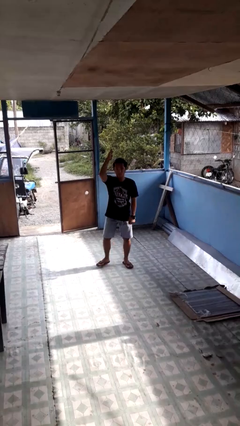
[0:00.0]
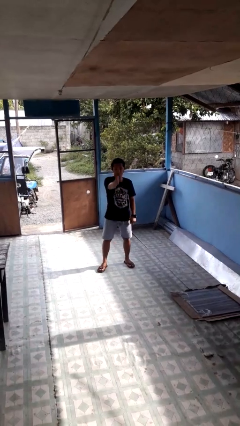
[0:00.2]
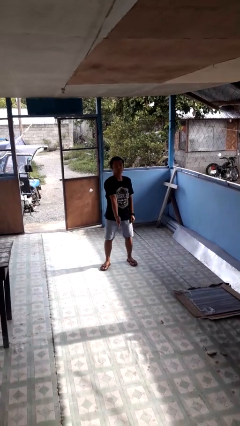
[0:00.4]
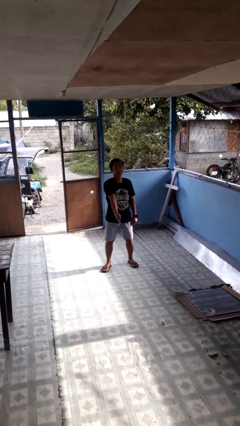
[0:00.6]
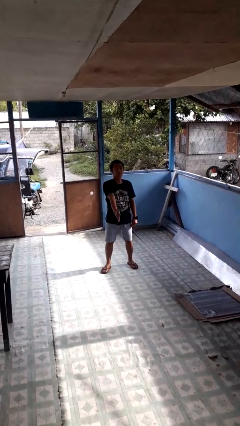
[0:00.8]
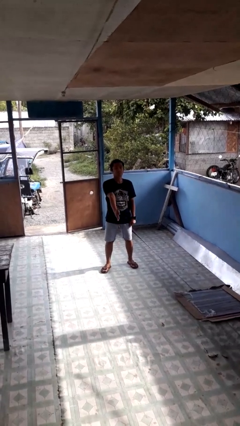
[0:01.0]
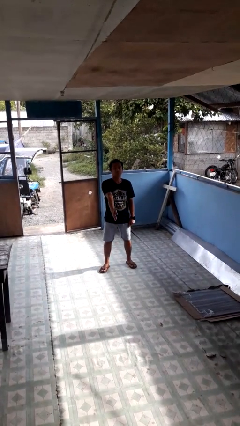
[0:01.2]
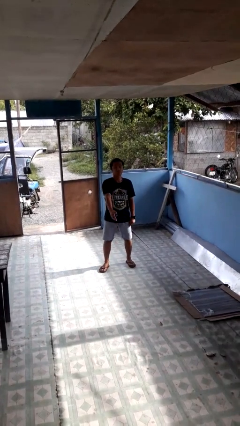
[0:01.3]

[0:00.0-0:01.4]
person karate chop

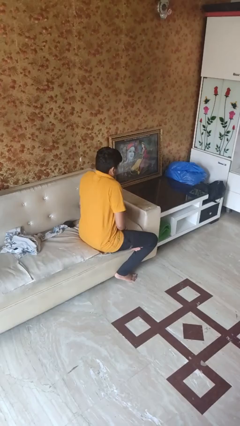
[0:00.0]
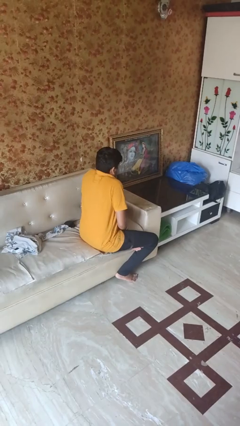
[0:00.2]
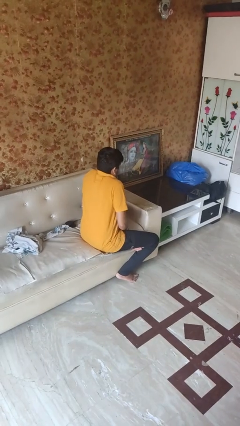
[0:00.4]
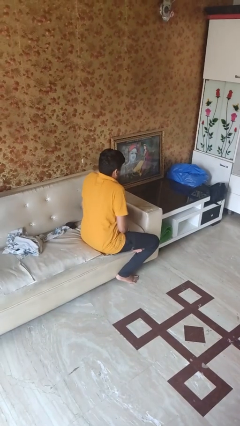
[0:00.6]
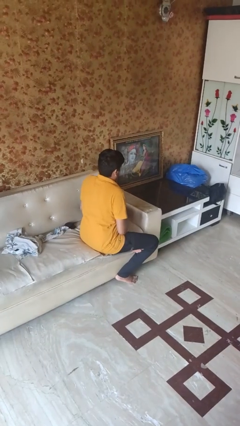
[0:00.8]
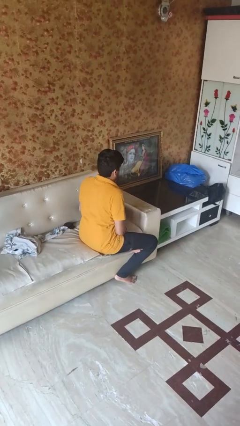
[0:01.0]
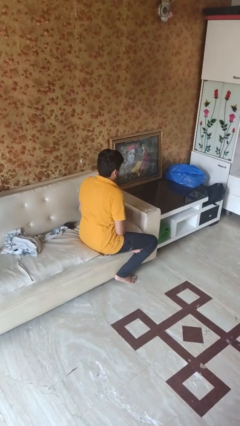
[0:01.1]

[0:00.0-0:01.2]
person shrugs

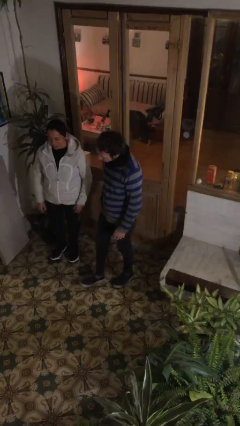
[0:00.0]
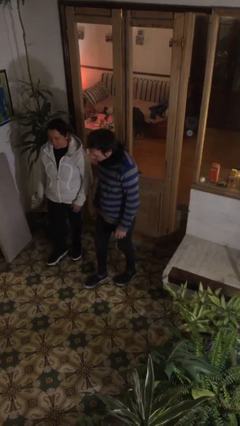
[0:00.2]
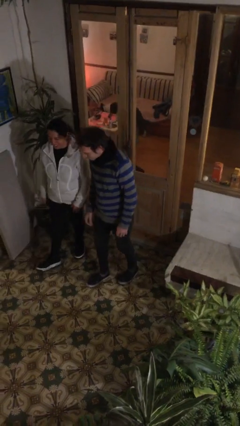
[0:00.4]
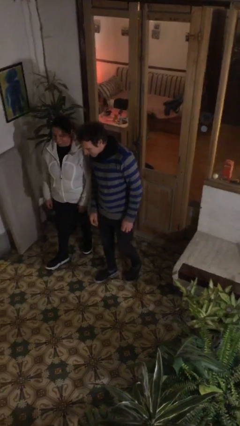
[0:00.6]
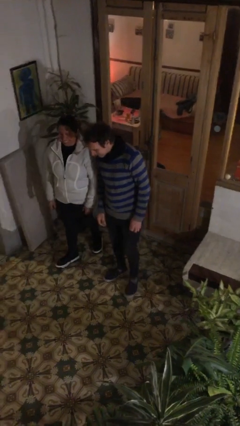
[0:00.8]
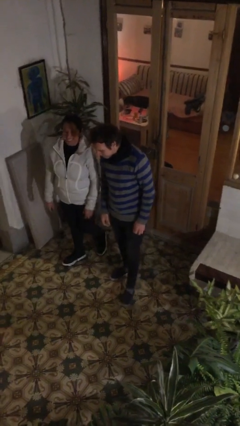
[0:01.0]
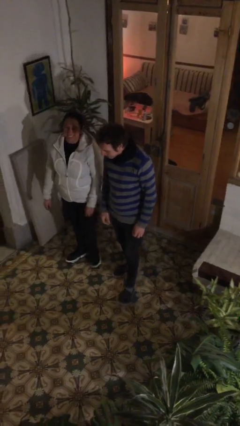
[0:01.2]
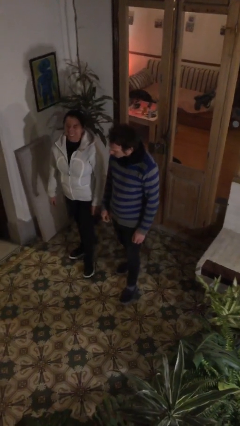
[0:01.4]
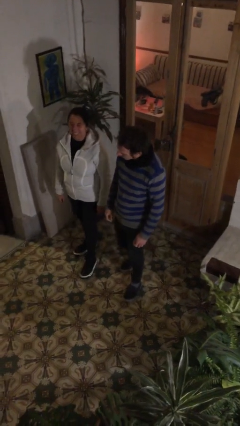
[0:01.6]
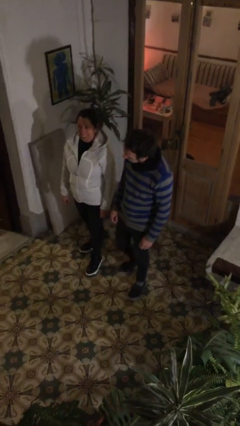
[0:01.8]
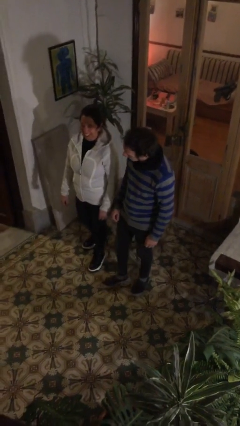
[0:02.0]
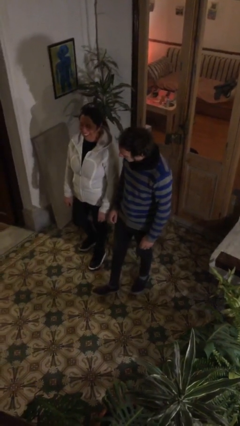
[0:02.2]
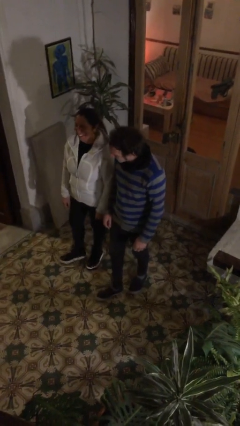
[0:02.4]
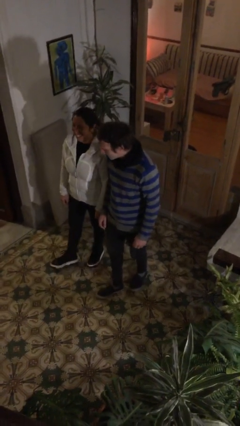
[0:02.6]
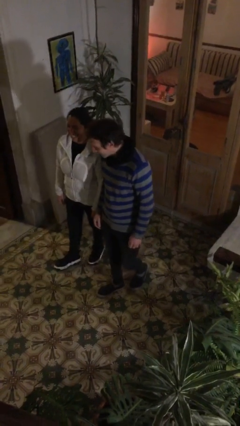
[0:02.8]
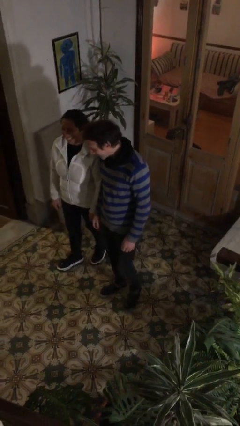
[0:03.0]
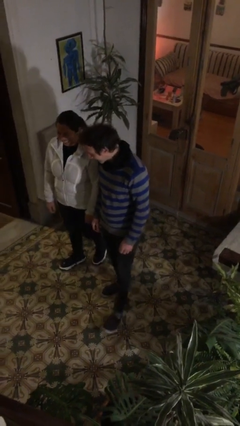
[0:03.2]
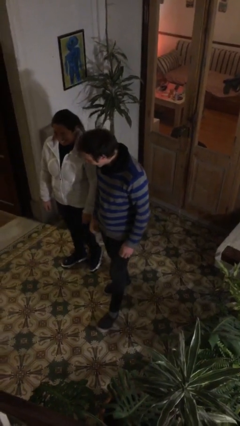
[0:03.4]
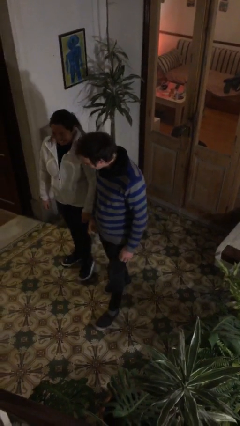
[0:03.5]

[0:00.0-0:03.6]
person talks to person

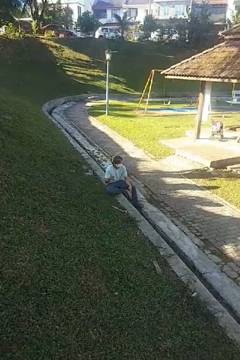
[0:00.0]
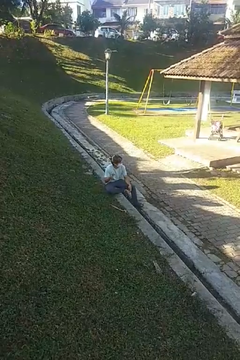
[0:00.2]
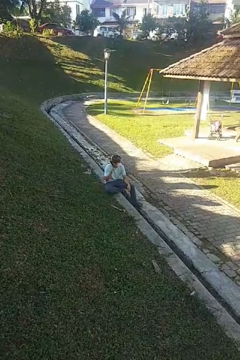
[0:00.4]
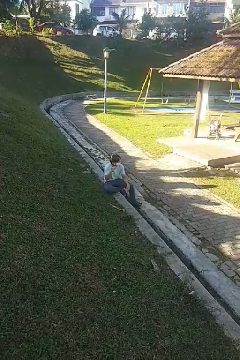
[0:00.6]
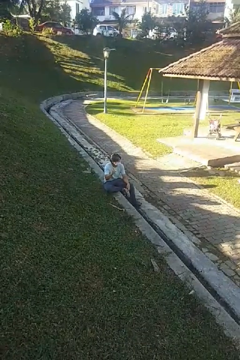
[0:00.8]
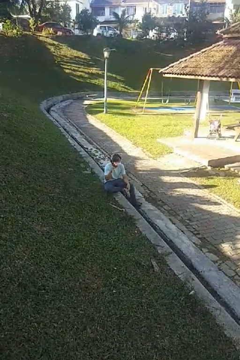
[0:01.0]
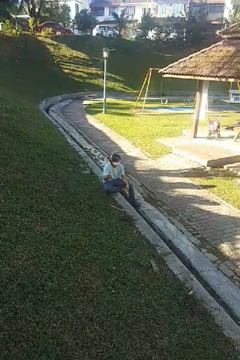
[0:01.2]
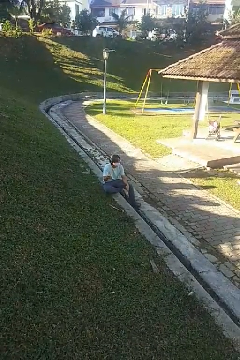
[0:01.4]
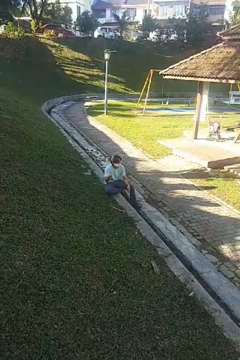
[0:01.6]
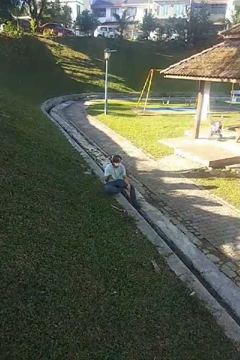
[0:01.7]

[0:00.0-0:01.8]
person snaps fingers

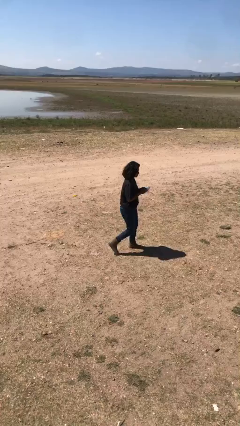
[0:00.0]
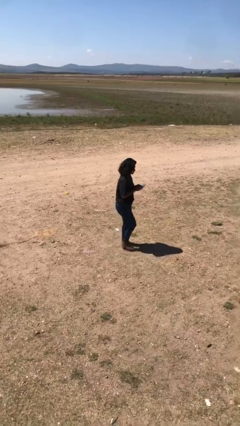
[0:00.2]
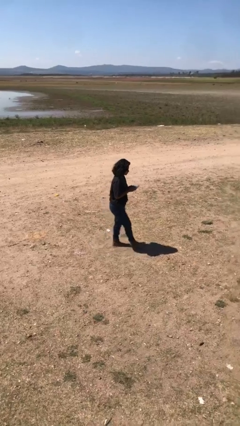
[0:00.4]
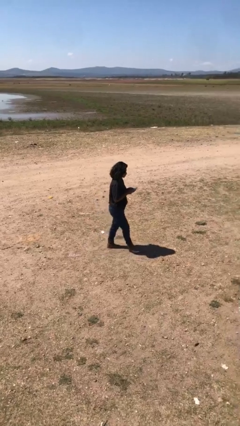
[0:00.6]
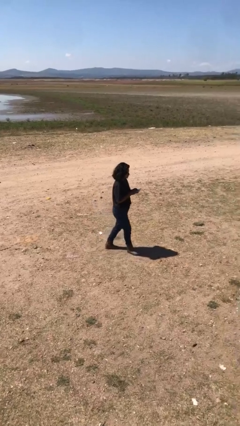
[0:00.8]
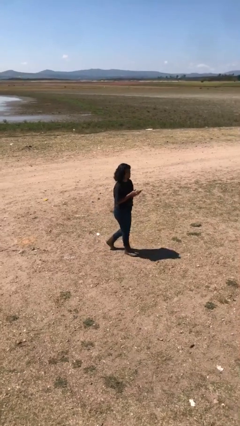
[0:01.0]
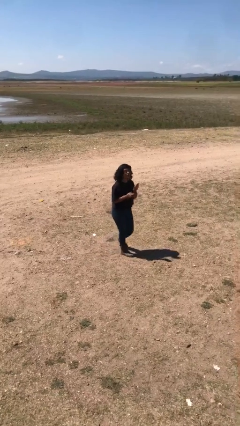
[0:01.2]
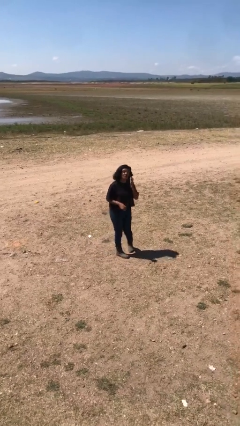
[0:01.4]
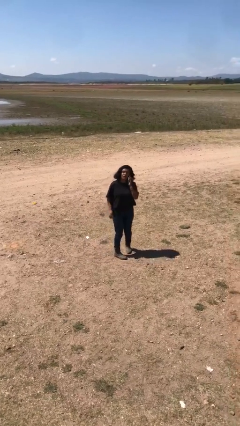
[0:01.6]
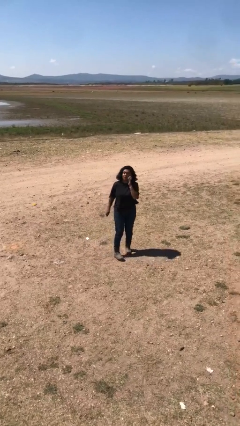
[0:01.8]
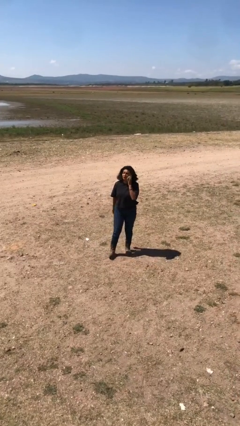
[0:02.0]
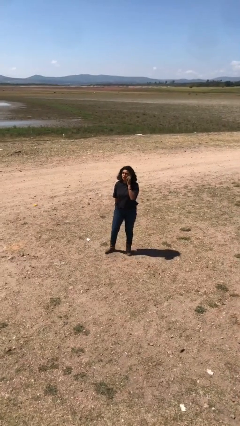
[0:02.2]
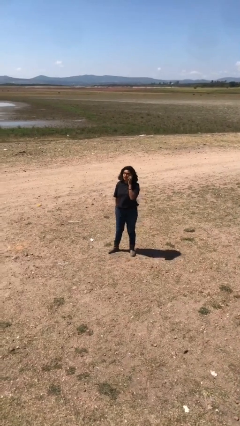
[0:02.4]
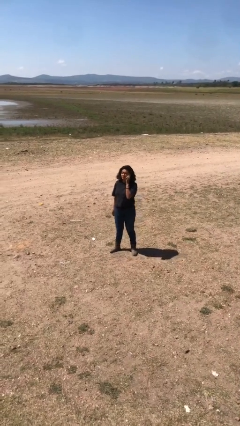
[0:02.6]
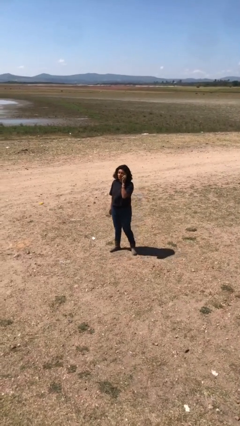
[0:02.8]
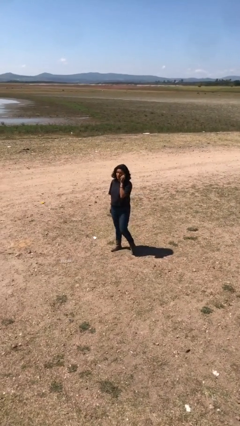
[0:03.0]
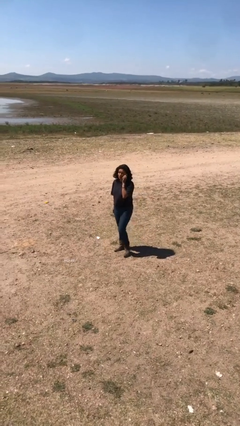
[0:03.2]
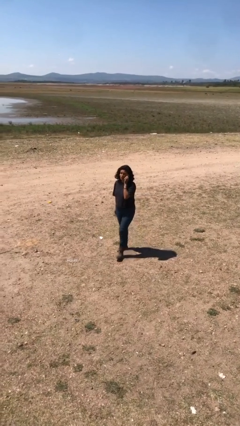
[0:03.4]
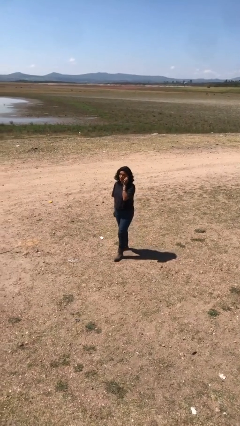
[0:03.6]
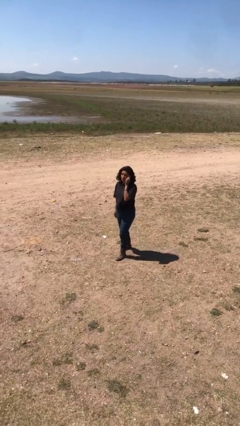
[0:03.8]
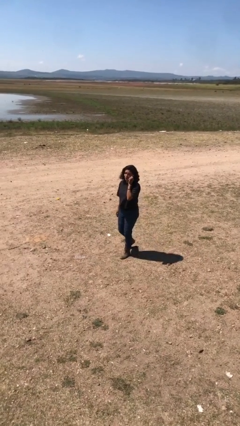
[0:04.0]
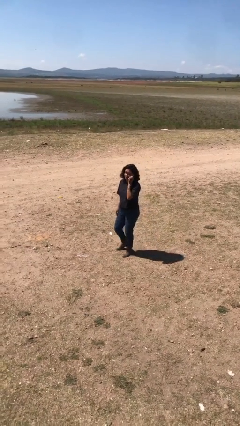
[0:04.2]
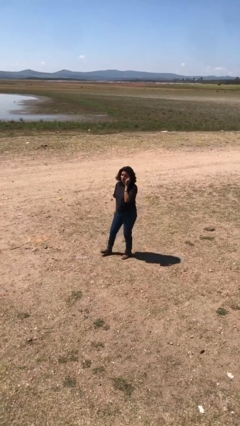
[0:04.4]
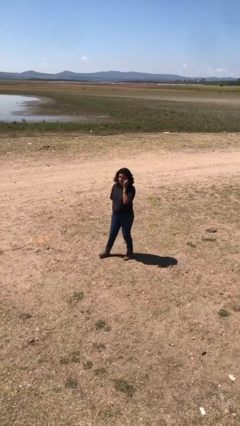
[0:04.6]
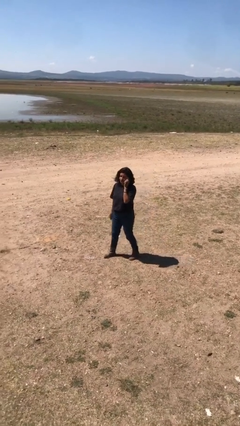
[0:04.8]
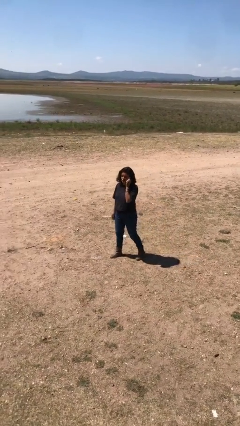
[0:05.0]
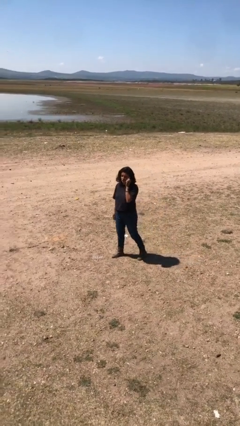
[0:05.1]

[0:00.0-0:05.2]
person talks on phone

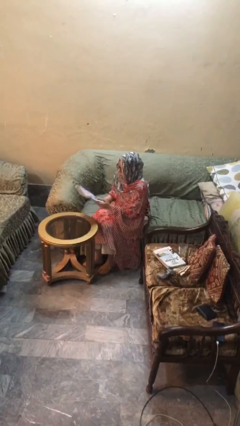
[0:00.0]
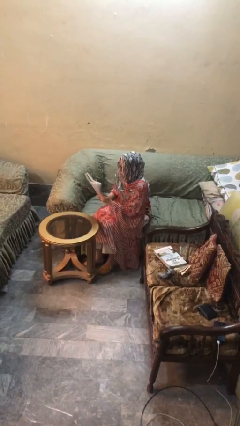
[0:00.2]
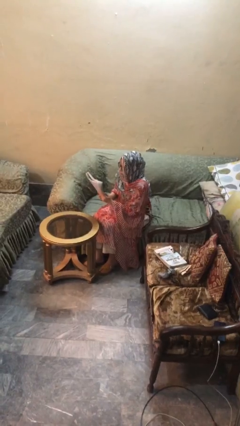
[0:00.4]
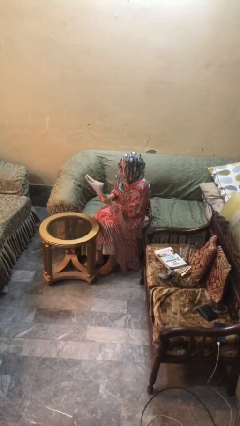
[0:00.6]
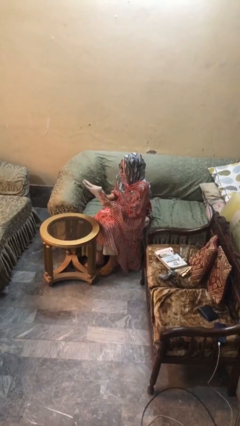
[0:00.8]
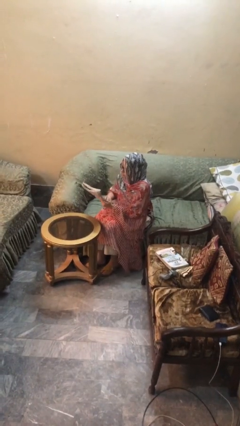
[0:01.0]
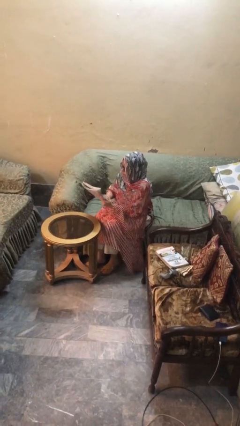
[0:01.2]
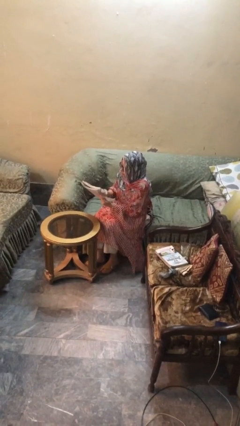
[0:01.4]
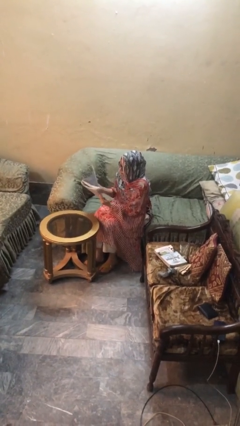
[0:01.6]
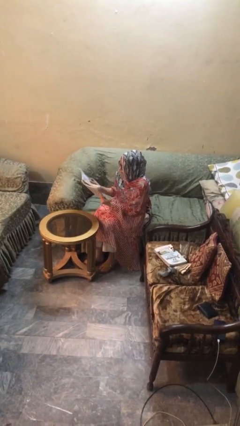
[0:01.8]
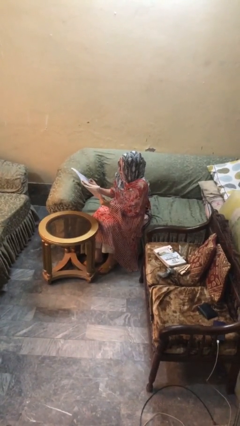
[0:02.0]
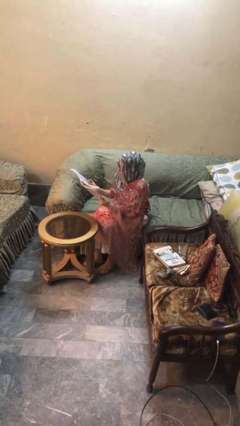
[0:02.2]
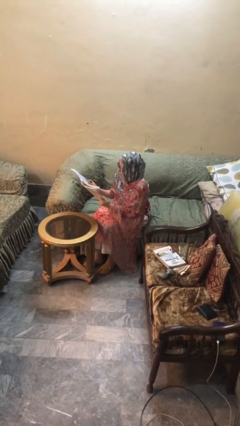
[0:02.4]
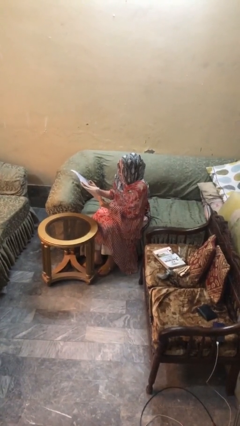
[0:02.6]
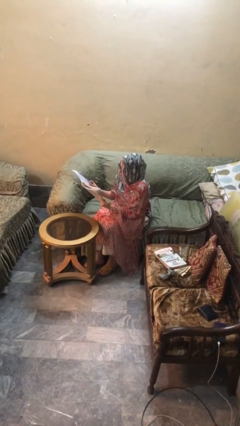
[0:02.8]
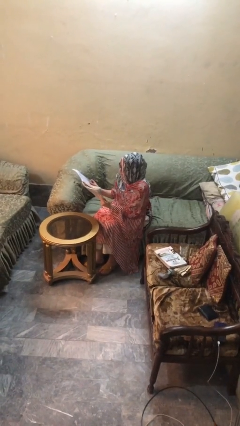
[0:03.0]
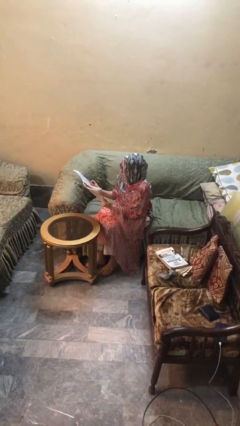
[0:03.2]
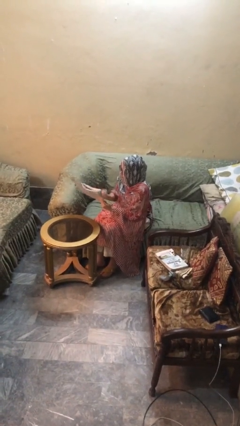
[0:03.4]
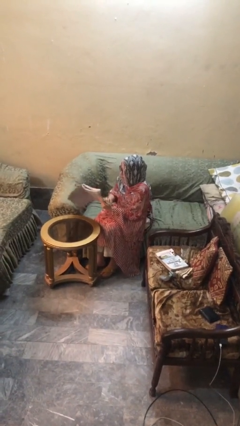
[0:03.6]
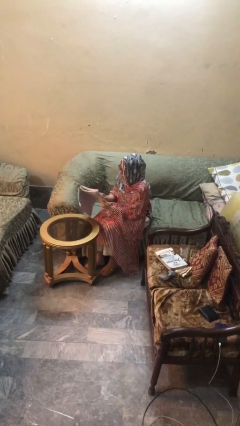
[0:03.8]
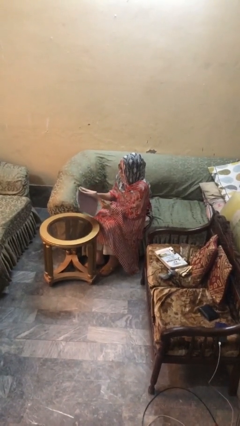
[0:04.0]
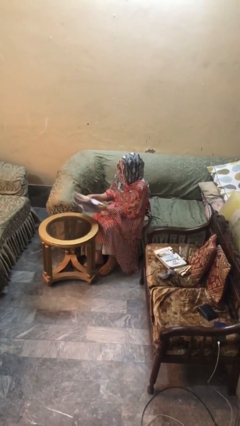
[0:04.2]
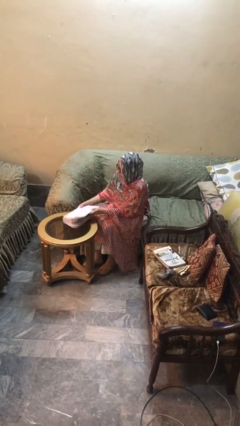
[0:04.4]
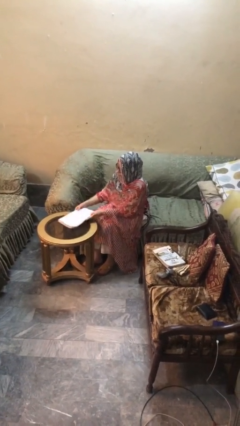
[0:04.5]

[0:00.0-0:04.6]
person reads magazine
